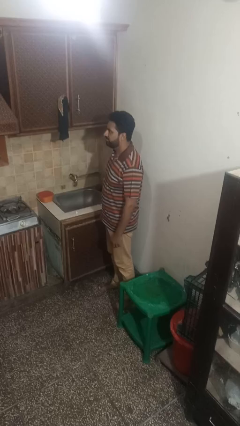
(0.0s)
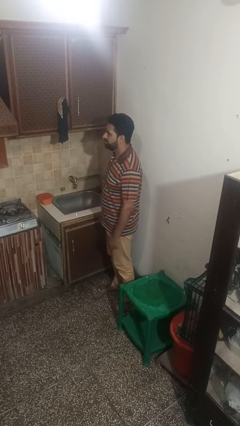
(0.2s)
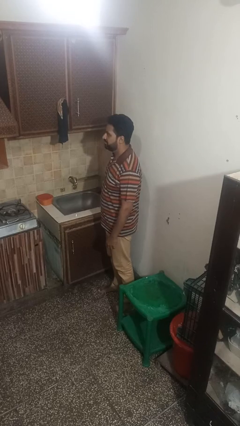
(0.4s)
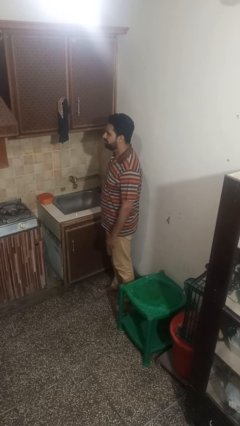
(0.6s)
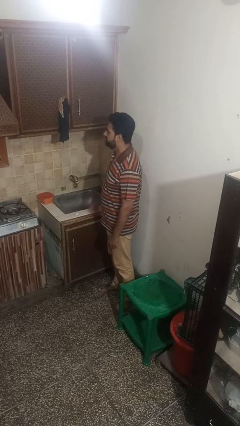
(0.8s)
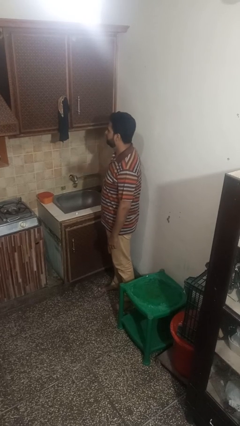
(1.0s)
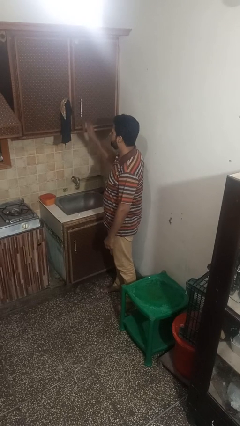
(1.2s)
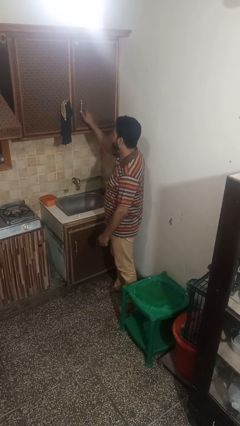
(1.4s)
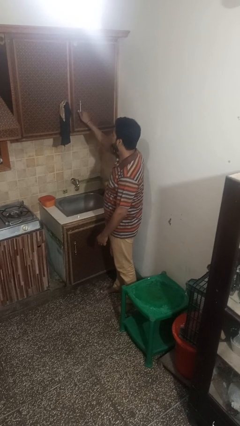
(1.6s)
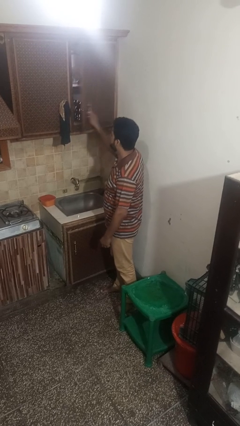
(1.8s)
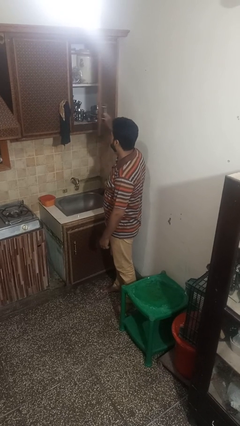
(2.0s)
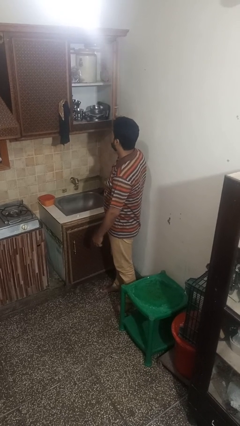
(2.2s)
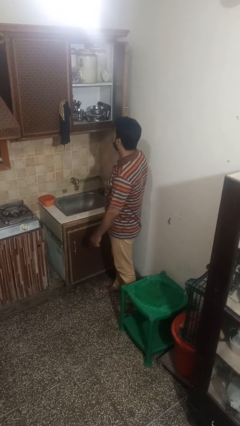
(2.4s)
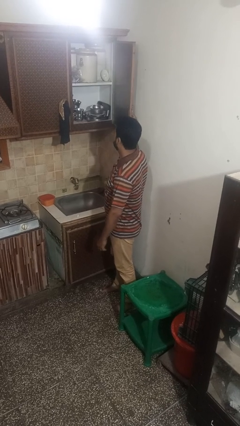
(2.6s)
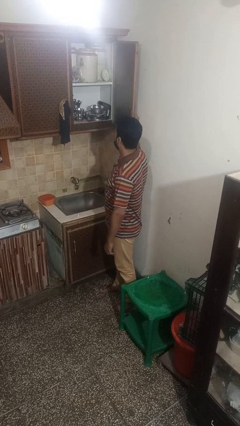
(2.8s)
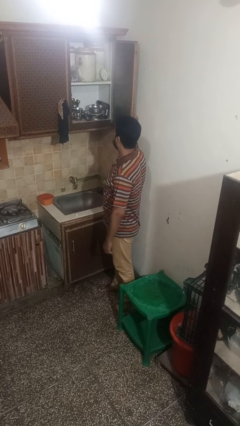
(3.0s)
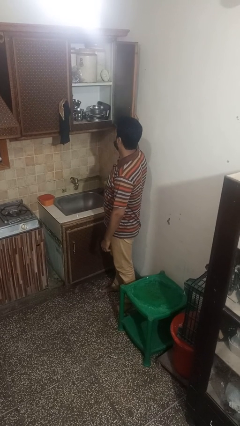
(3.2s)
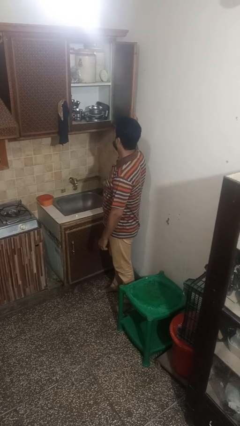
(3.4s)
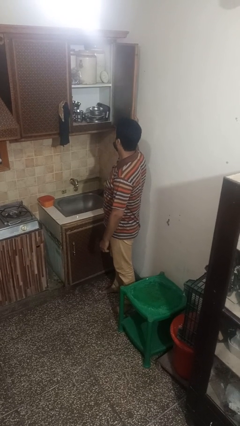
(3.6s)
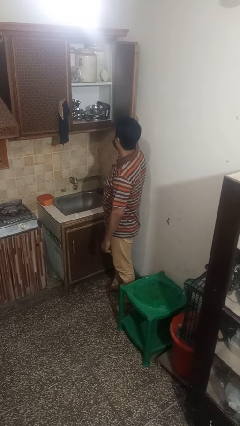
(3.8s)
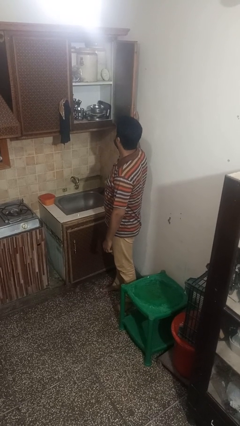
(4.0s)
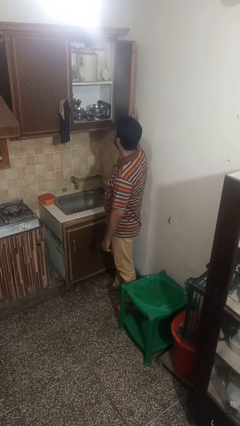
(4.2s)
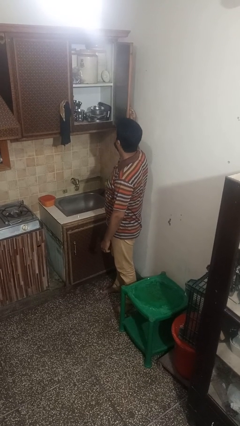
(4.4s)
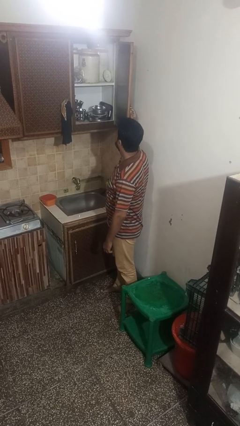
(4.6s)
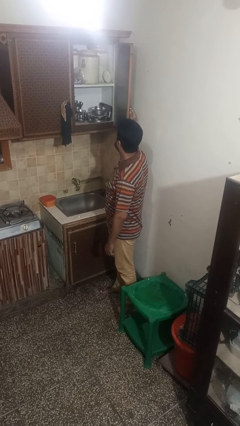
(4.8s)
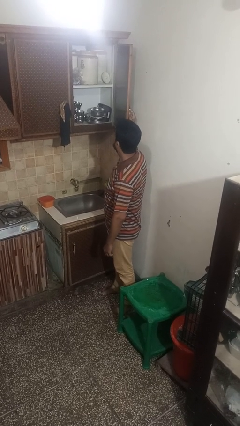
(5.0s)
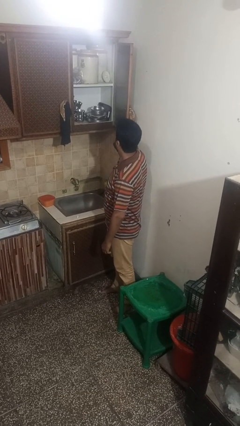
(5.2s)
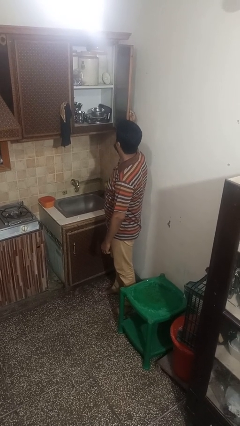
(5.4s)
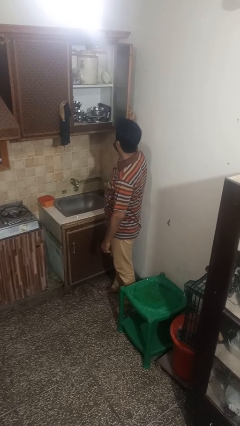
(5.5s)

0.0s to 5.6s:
person opens cabinet

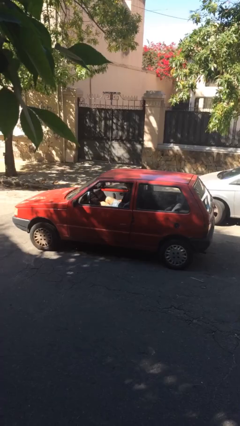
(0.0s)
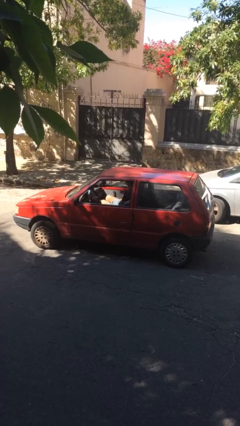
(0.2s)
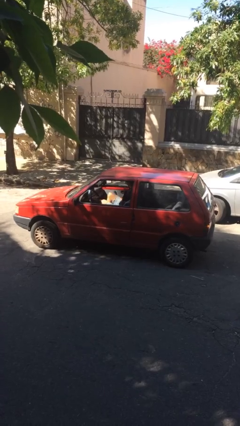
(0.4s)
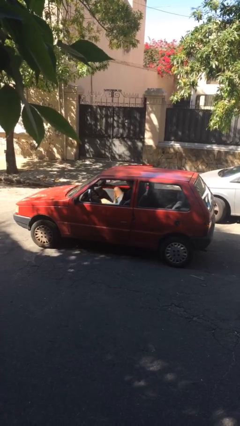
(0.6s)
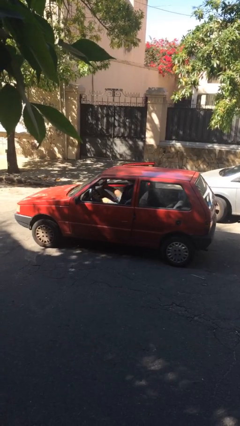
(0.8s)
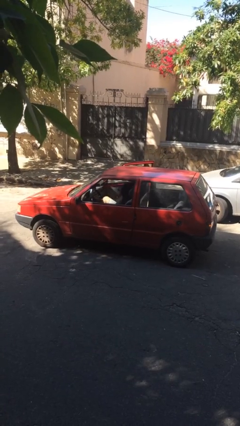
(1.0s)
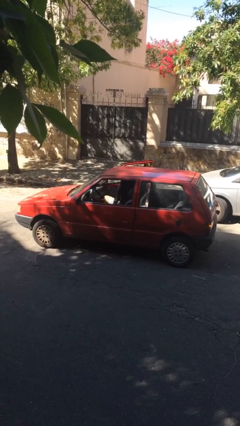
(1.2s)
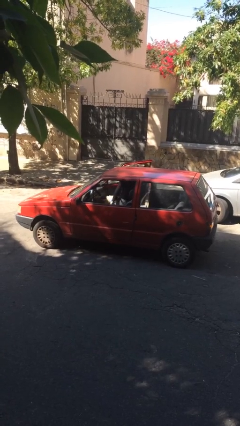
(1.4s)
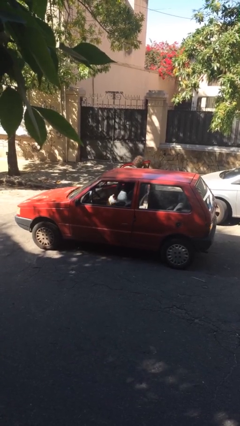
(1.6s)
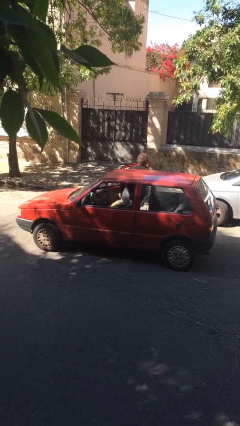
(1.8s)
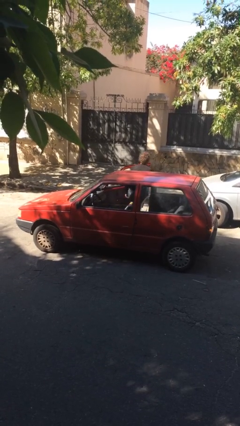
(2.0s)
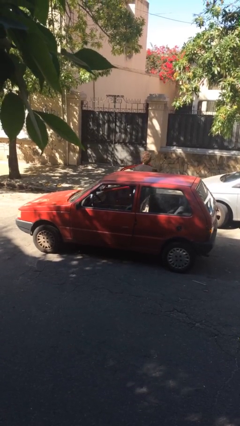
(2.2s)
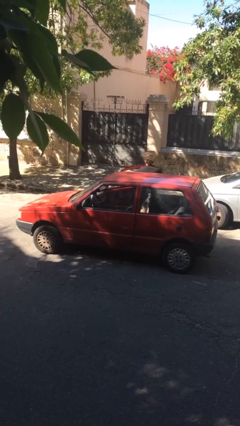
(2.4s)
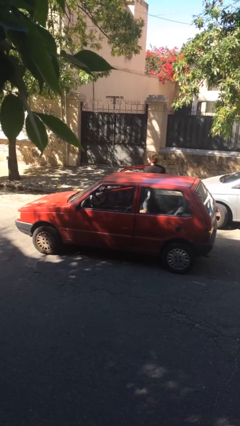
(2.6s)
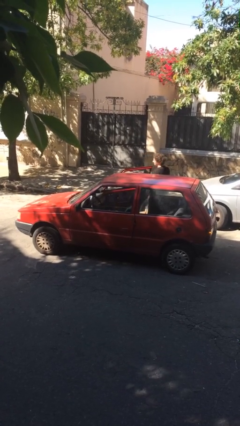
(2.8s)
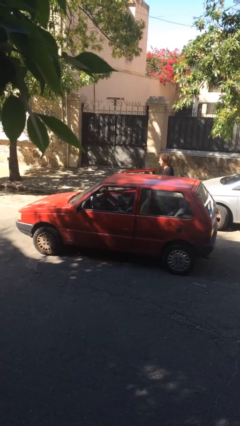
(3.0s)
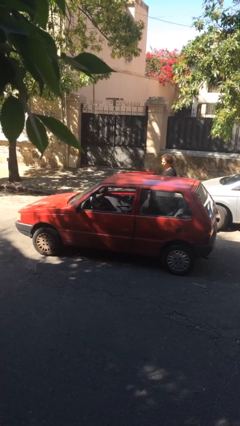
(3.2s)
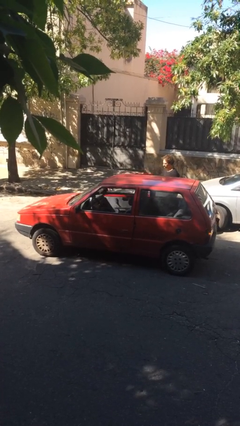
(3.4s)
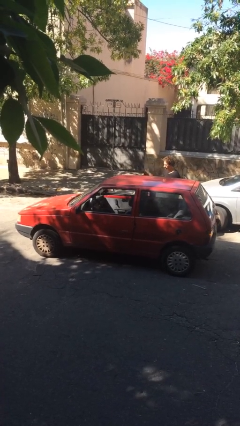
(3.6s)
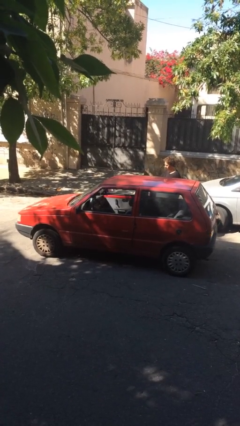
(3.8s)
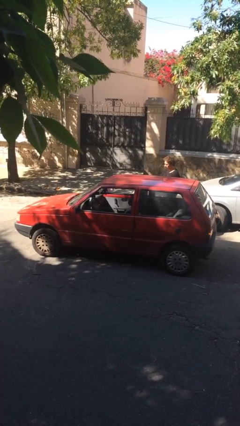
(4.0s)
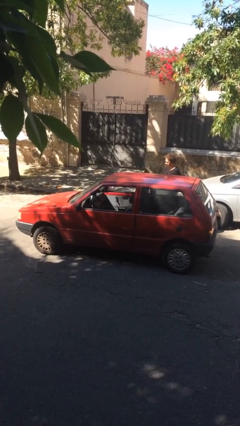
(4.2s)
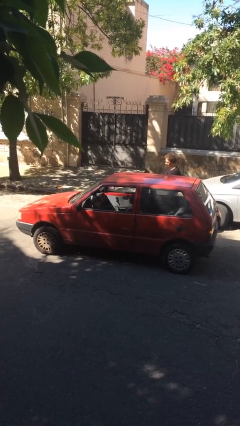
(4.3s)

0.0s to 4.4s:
car drops off person

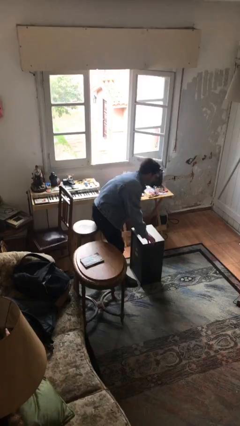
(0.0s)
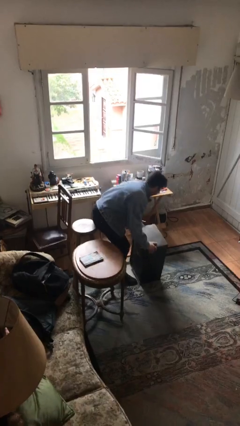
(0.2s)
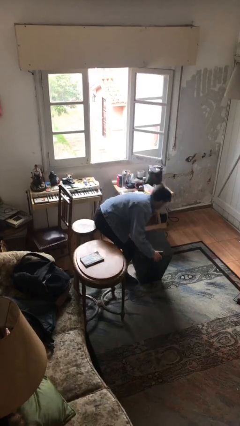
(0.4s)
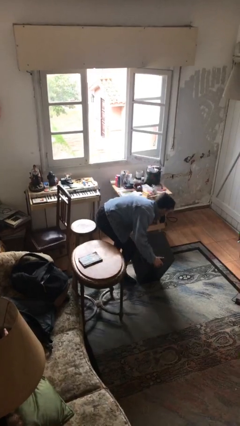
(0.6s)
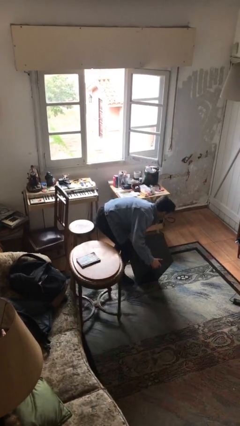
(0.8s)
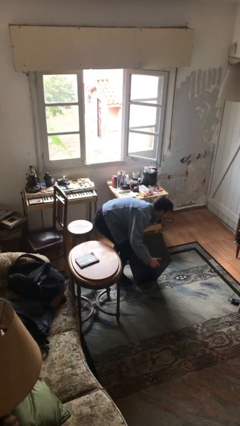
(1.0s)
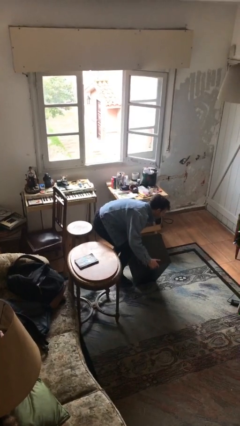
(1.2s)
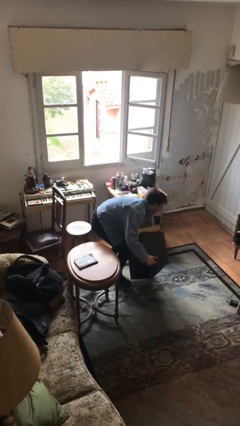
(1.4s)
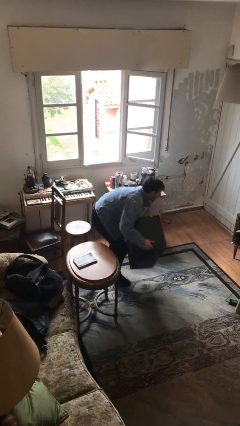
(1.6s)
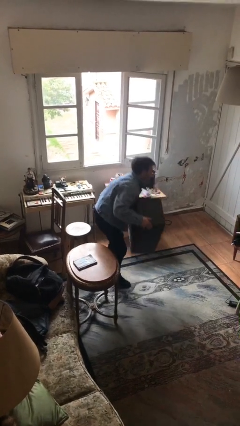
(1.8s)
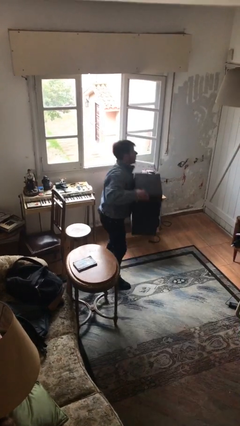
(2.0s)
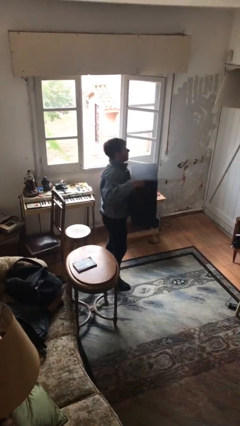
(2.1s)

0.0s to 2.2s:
person picks up object from floor

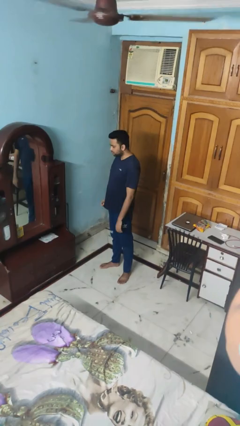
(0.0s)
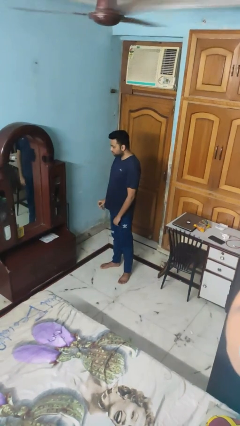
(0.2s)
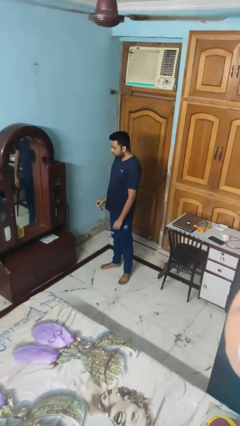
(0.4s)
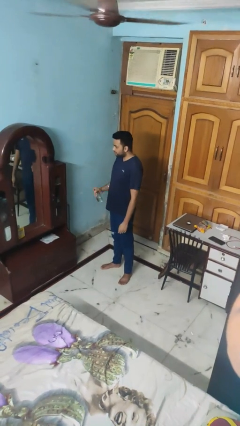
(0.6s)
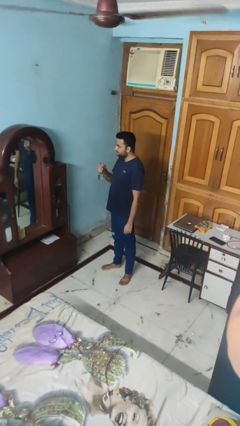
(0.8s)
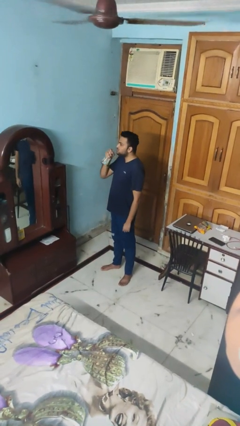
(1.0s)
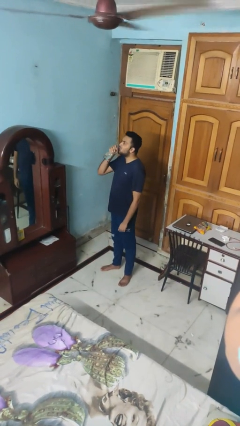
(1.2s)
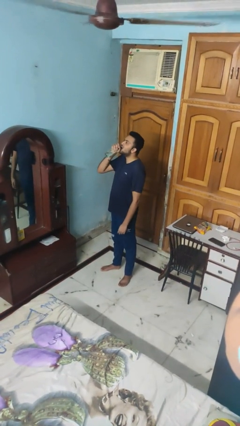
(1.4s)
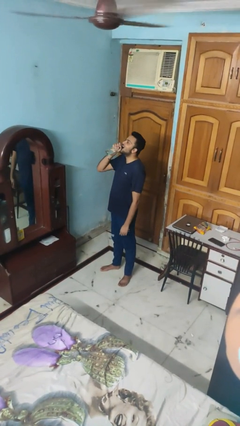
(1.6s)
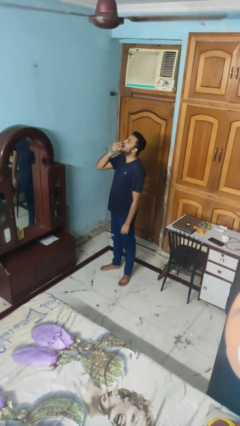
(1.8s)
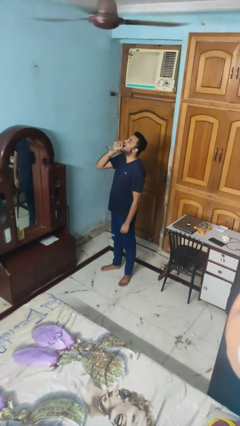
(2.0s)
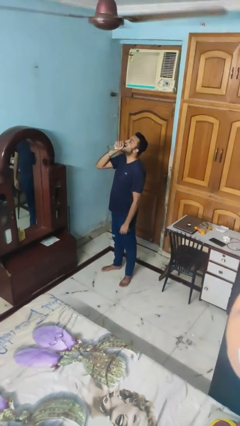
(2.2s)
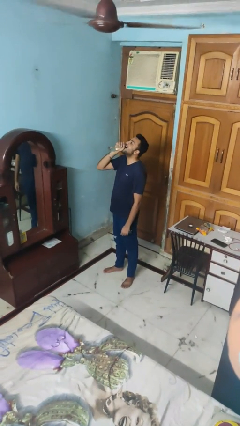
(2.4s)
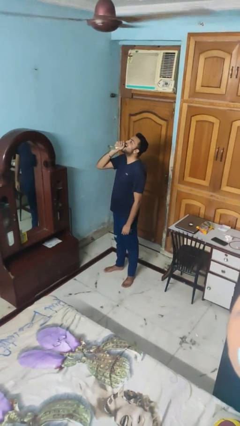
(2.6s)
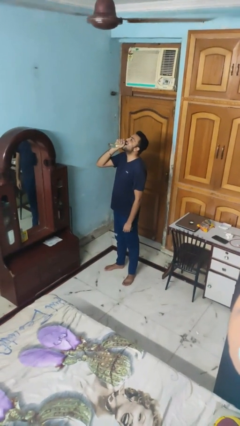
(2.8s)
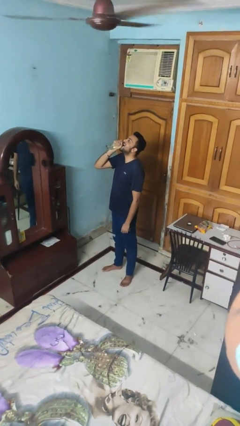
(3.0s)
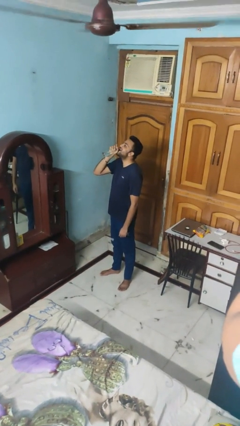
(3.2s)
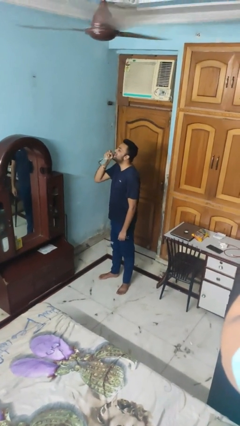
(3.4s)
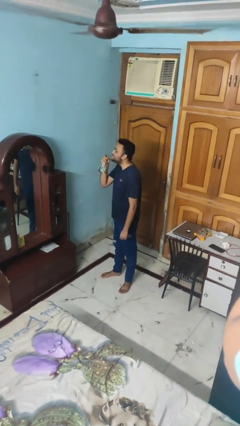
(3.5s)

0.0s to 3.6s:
person drinks from bottle

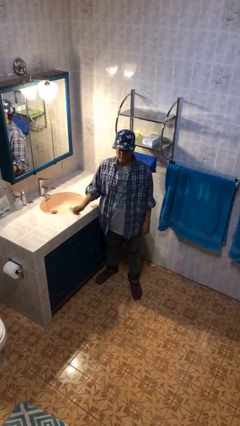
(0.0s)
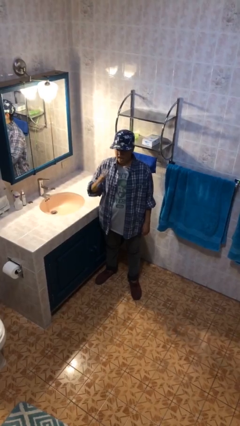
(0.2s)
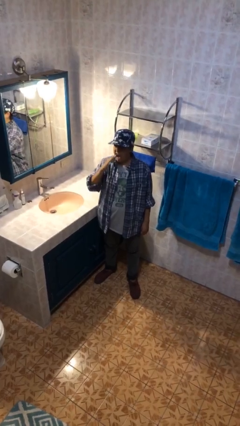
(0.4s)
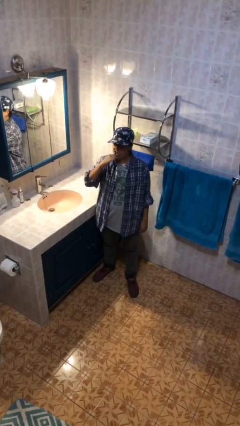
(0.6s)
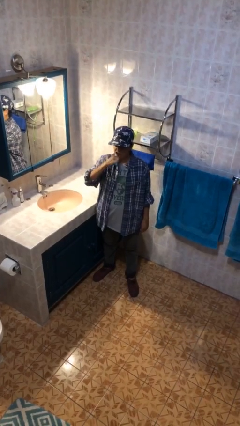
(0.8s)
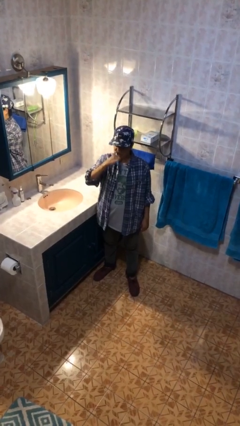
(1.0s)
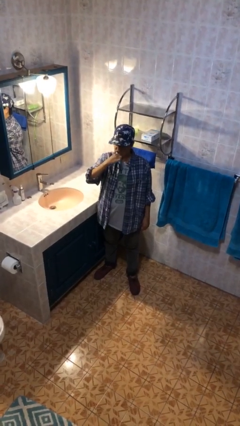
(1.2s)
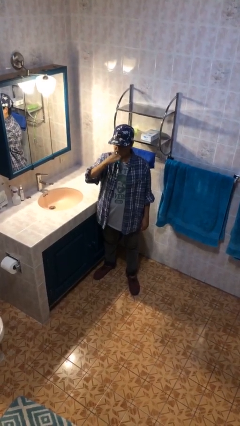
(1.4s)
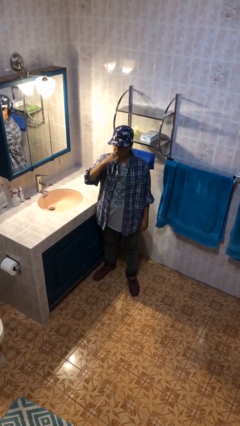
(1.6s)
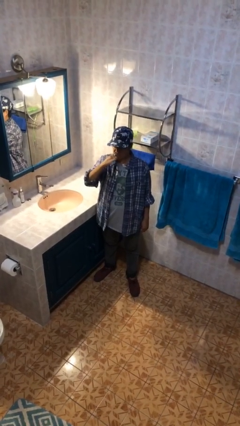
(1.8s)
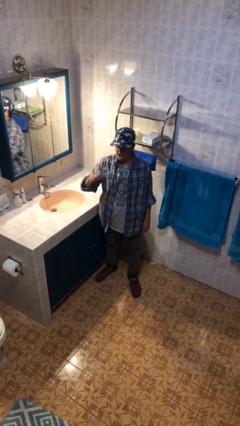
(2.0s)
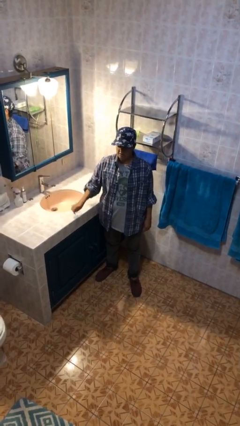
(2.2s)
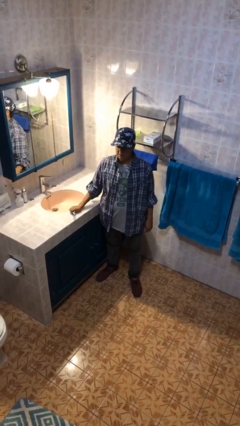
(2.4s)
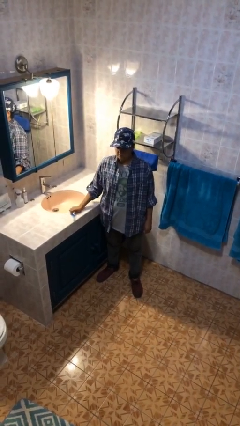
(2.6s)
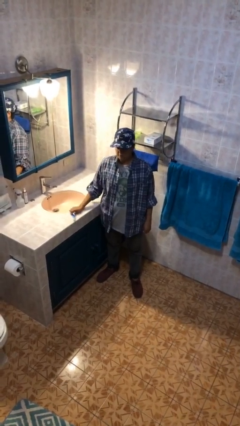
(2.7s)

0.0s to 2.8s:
person brushes teeth
